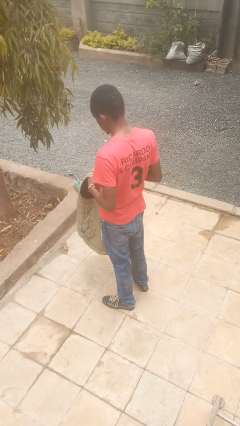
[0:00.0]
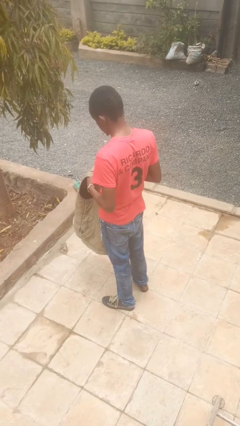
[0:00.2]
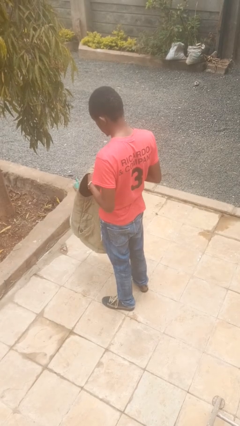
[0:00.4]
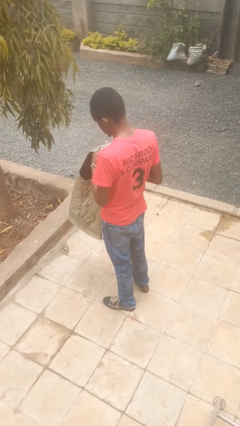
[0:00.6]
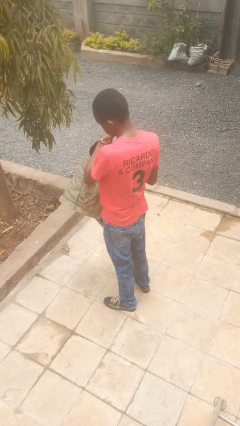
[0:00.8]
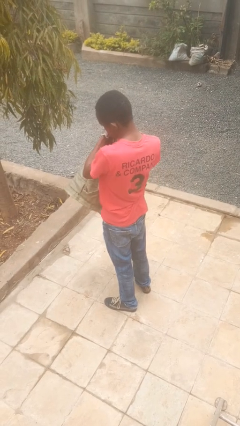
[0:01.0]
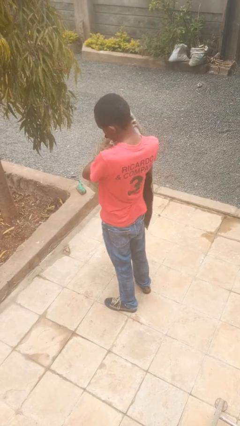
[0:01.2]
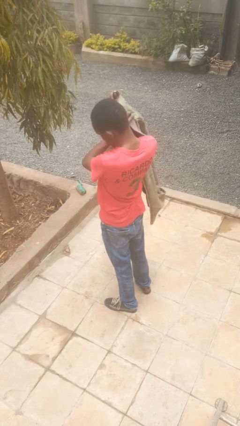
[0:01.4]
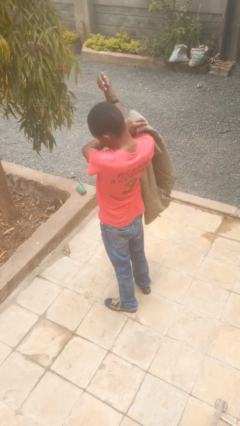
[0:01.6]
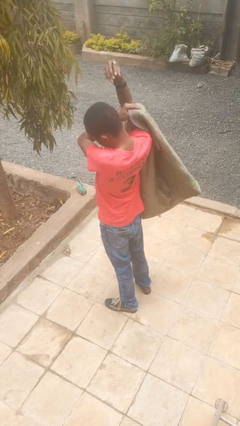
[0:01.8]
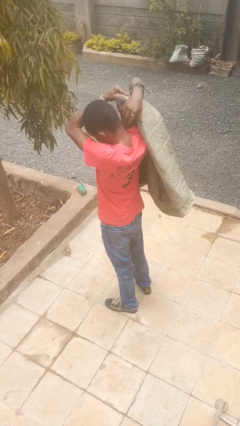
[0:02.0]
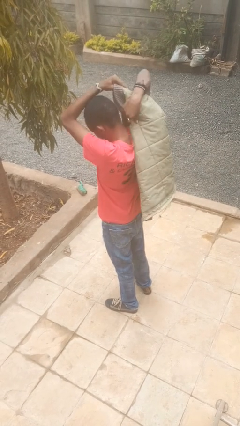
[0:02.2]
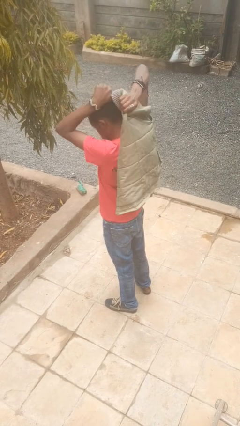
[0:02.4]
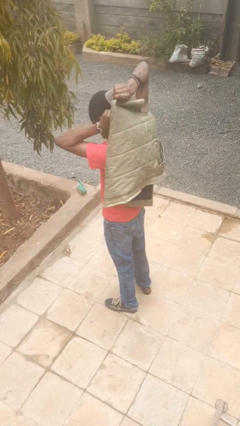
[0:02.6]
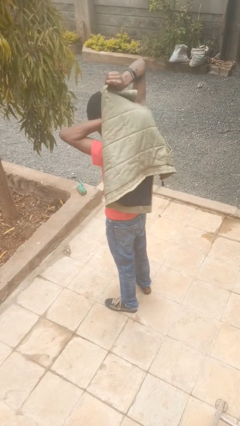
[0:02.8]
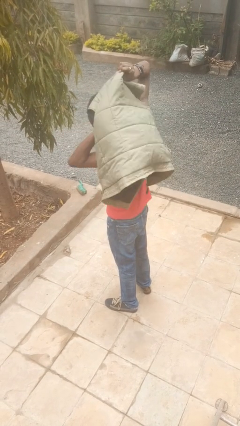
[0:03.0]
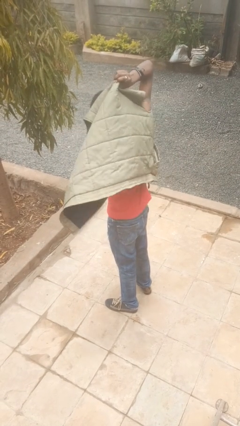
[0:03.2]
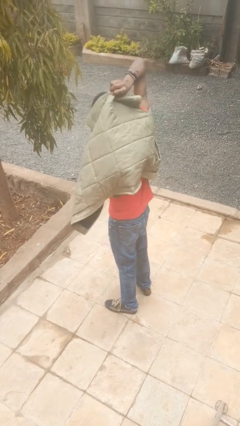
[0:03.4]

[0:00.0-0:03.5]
person puts on jacket

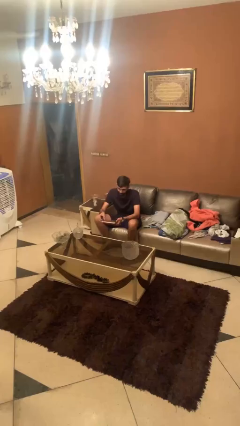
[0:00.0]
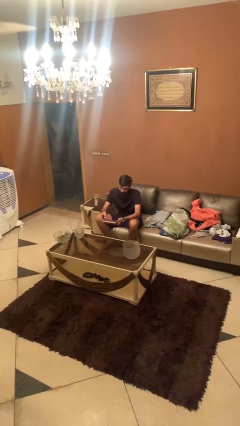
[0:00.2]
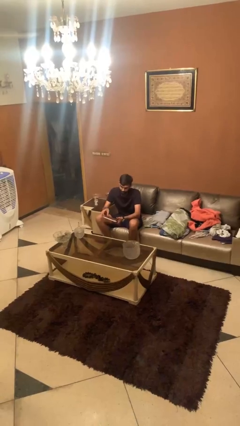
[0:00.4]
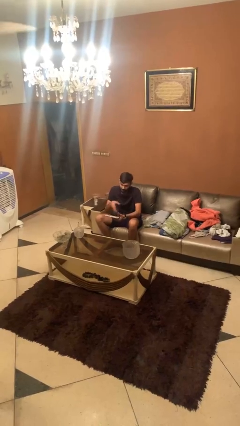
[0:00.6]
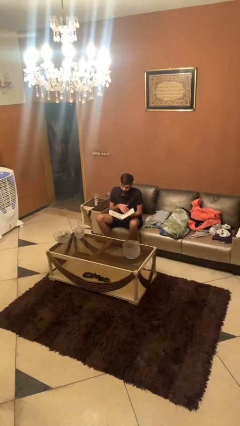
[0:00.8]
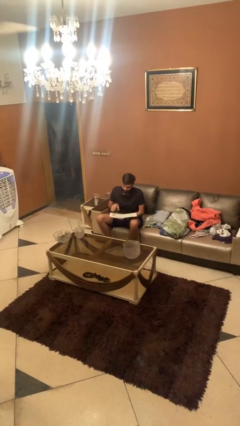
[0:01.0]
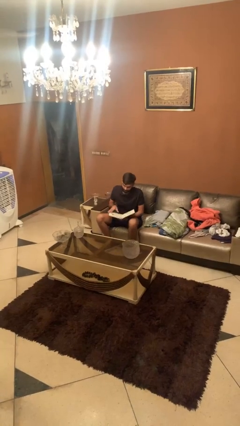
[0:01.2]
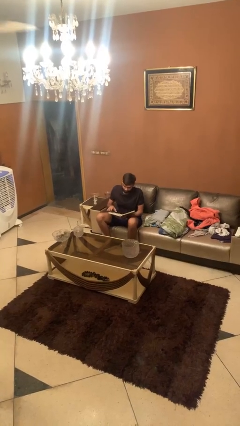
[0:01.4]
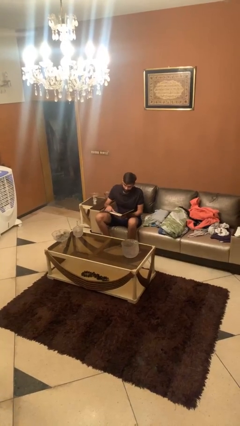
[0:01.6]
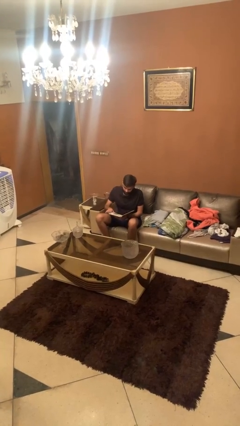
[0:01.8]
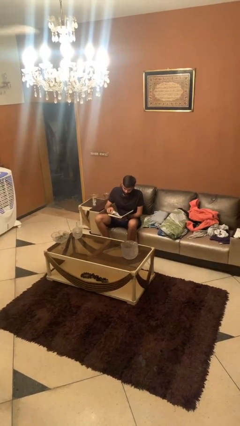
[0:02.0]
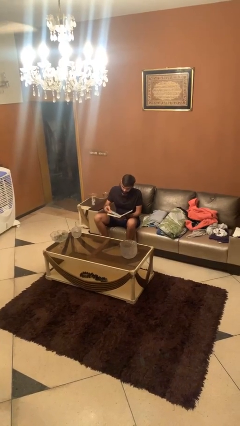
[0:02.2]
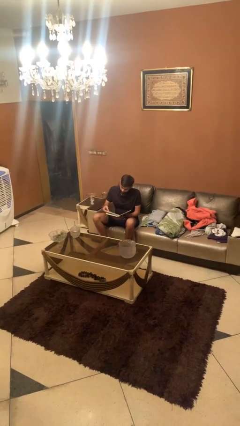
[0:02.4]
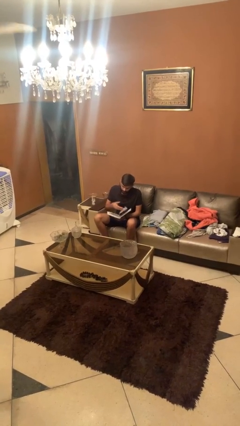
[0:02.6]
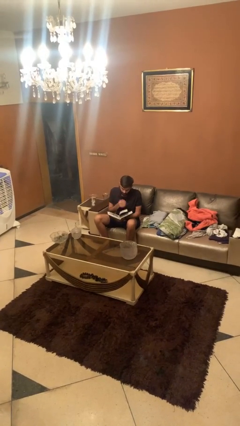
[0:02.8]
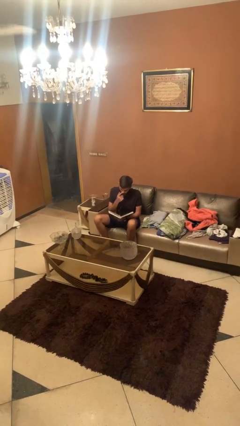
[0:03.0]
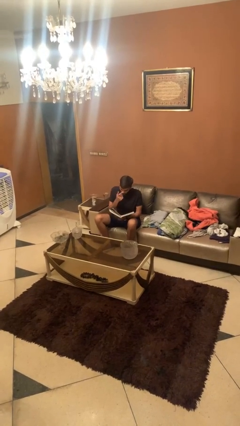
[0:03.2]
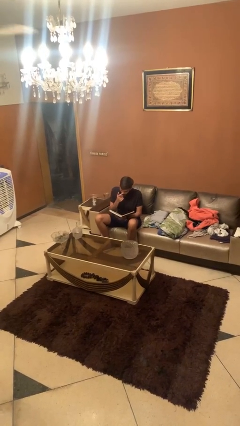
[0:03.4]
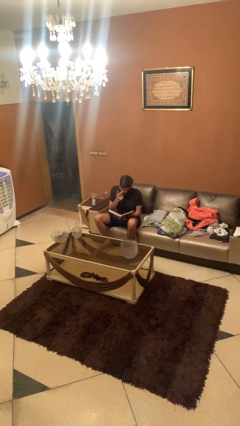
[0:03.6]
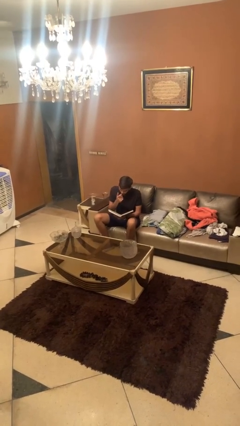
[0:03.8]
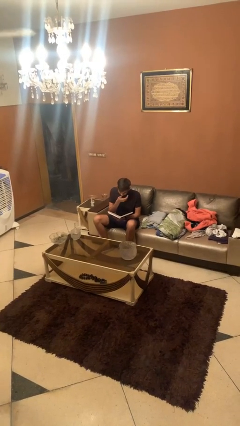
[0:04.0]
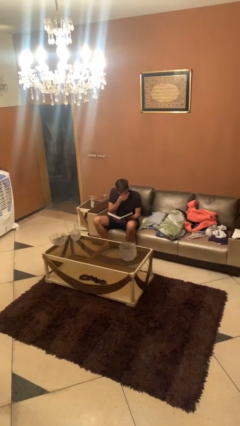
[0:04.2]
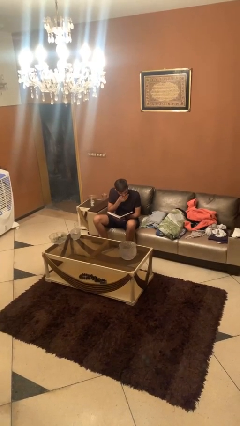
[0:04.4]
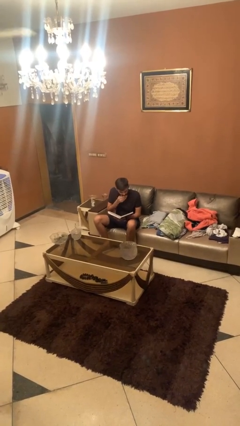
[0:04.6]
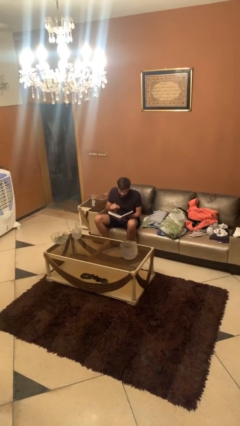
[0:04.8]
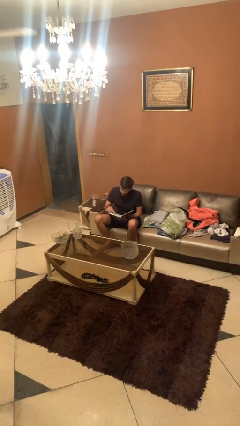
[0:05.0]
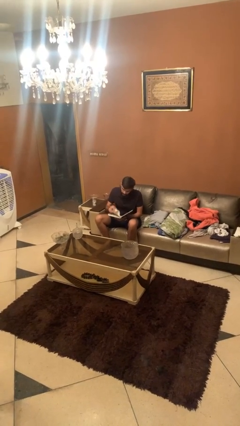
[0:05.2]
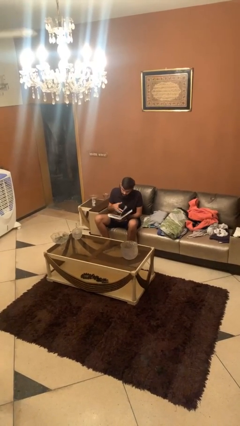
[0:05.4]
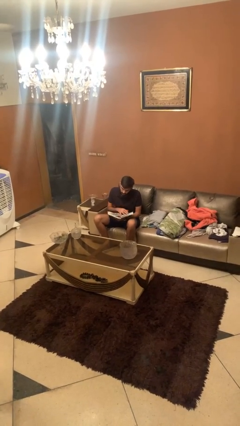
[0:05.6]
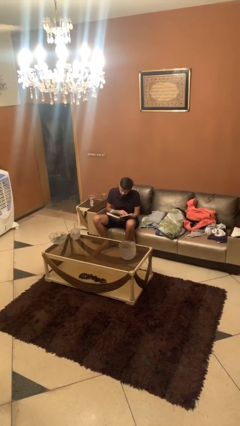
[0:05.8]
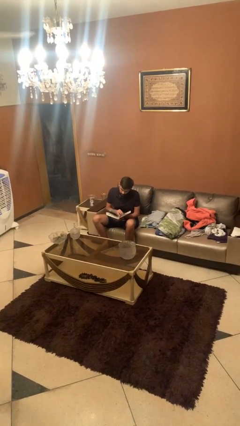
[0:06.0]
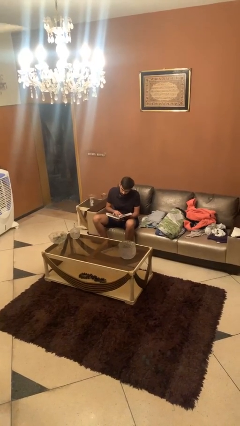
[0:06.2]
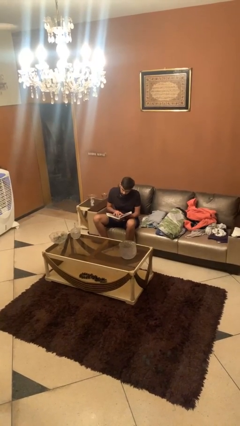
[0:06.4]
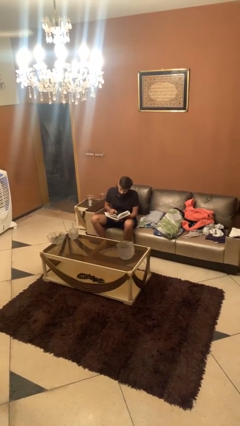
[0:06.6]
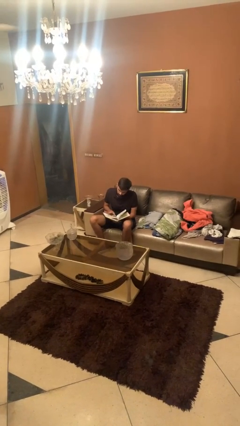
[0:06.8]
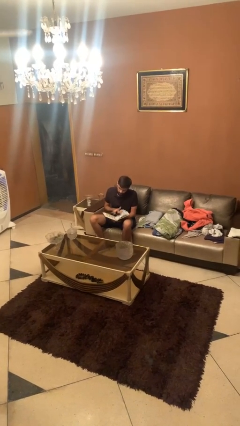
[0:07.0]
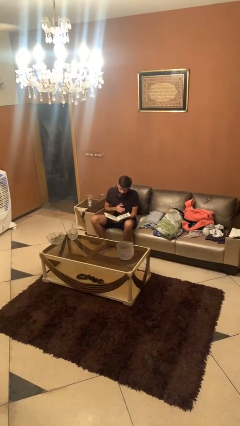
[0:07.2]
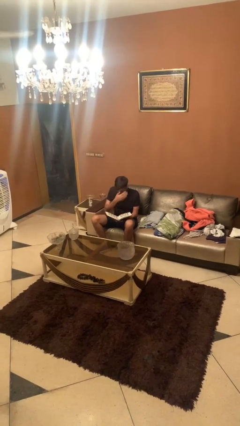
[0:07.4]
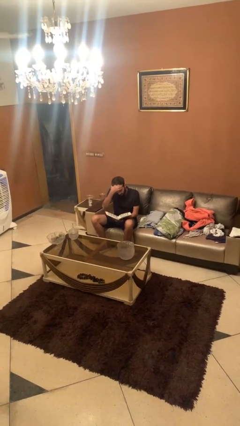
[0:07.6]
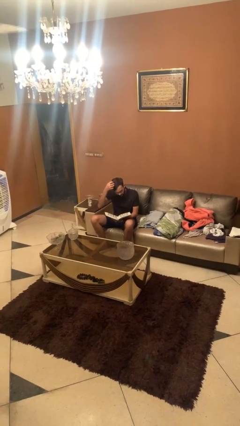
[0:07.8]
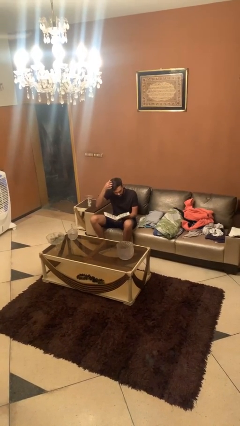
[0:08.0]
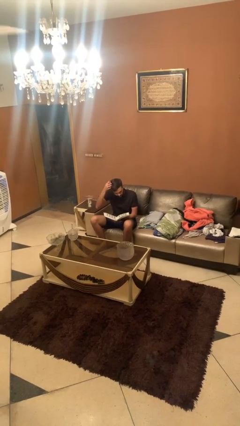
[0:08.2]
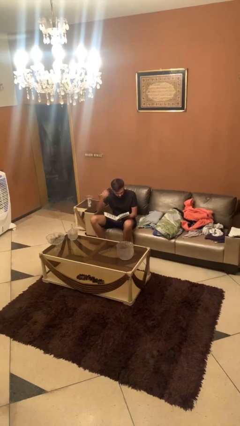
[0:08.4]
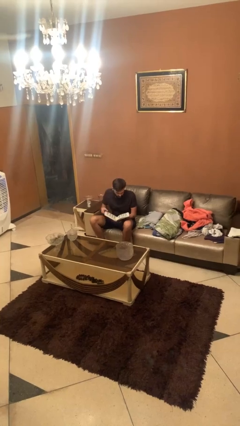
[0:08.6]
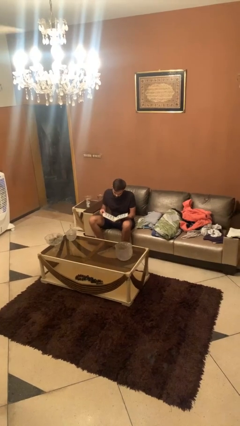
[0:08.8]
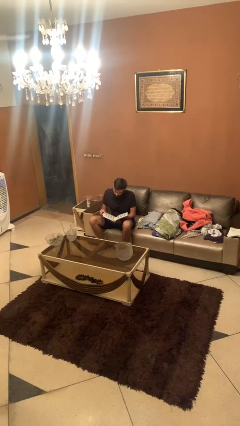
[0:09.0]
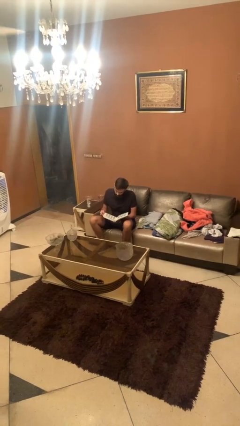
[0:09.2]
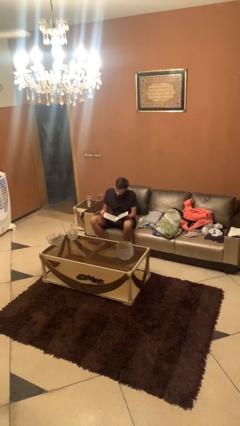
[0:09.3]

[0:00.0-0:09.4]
person reads document

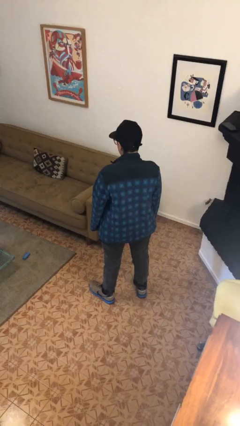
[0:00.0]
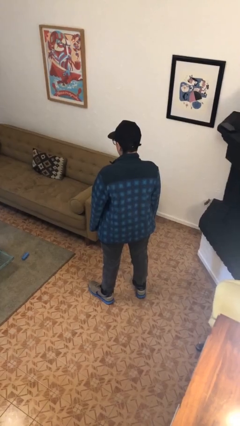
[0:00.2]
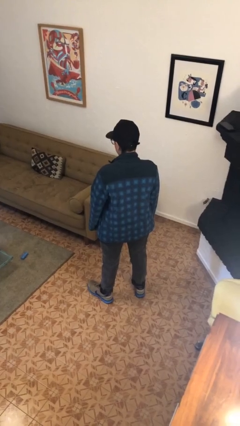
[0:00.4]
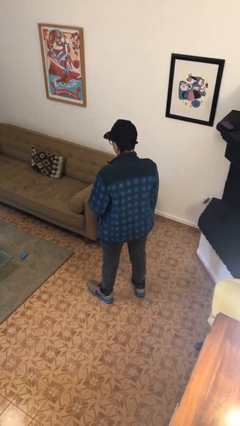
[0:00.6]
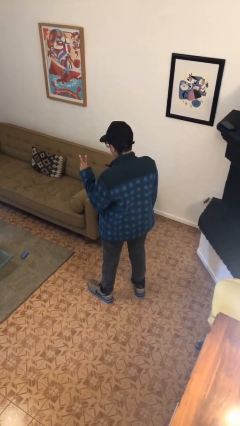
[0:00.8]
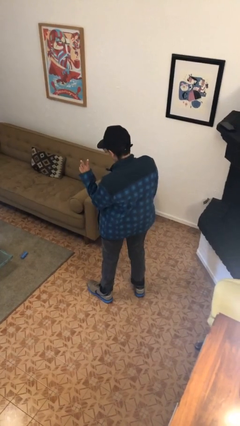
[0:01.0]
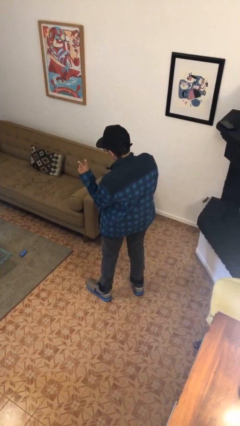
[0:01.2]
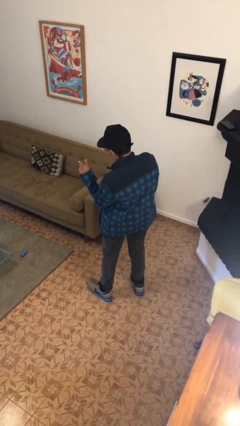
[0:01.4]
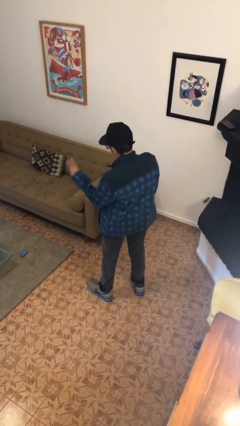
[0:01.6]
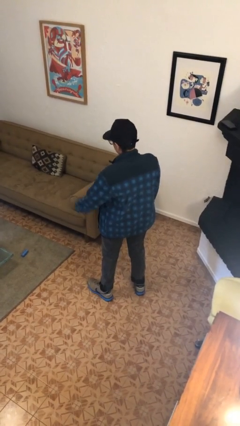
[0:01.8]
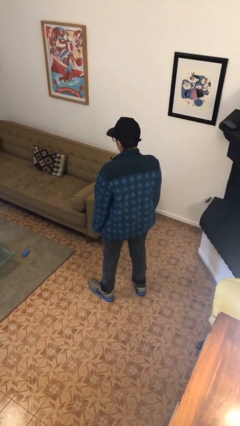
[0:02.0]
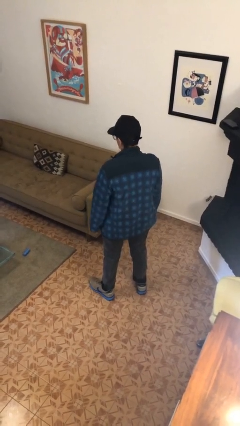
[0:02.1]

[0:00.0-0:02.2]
person gestures peace

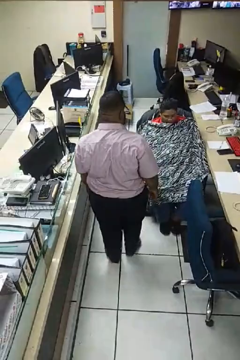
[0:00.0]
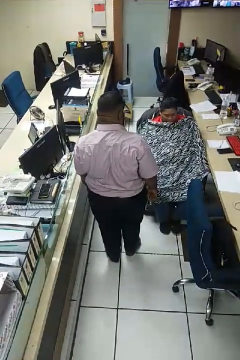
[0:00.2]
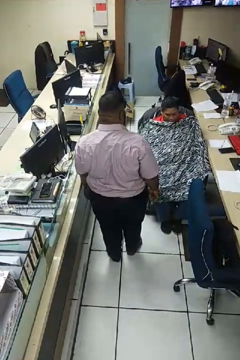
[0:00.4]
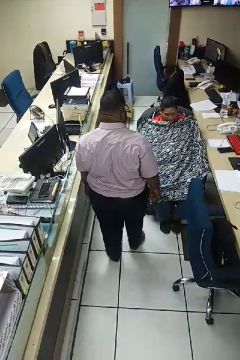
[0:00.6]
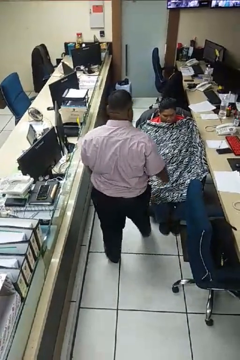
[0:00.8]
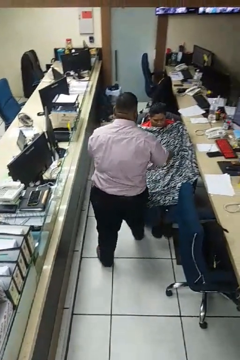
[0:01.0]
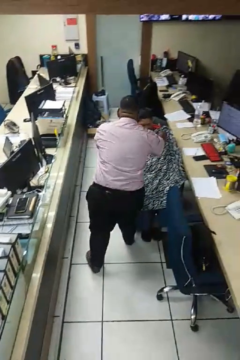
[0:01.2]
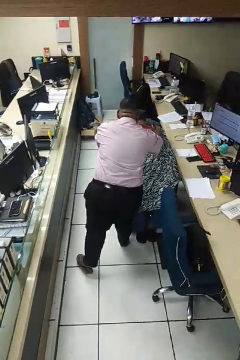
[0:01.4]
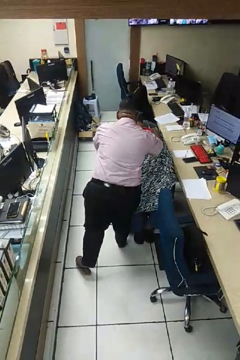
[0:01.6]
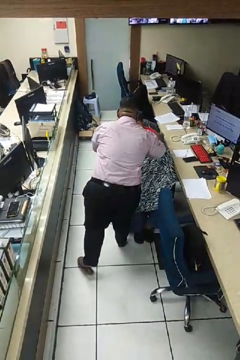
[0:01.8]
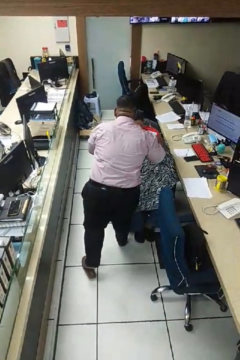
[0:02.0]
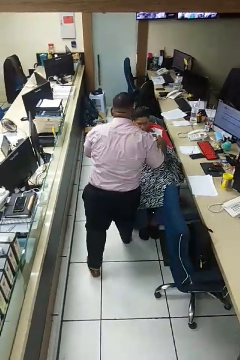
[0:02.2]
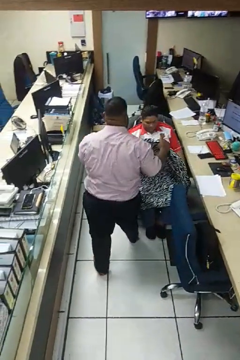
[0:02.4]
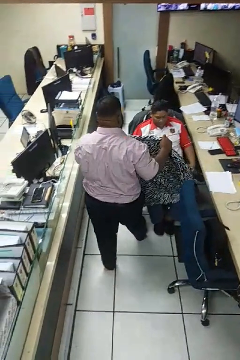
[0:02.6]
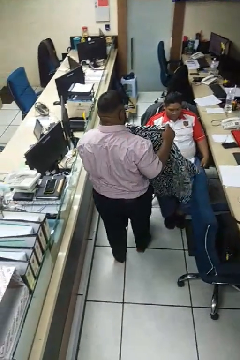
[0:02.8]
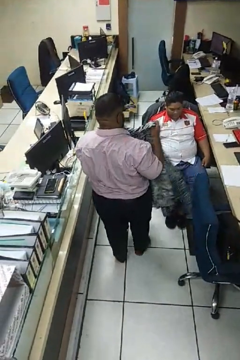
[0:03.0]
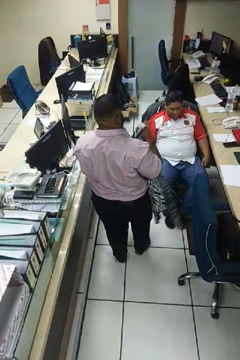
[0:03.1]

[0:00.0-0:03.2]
person uncovers friend with blanket
